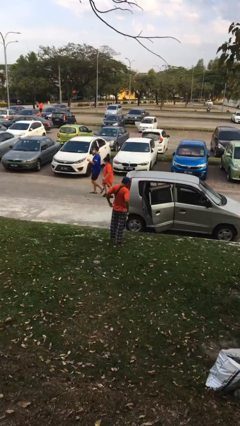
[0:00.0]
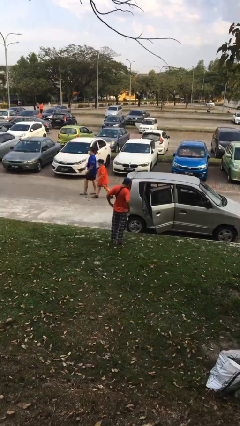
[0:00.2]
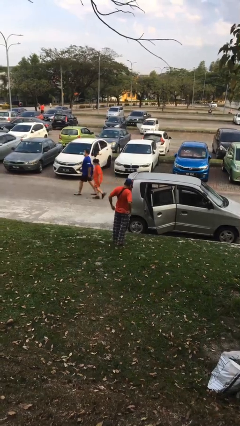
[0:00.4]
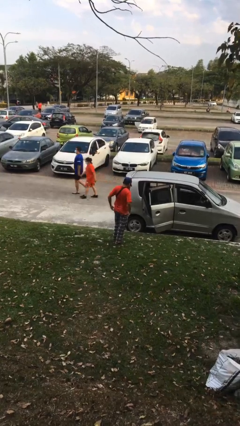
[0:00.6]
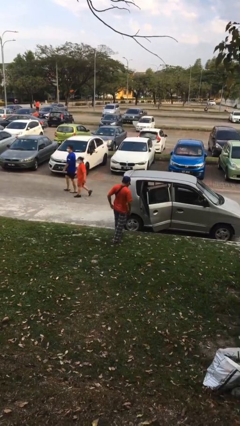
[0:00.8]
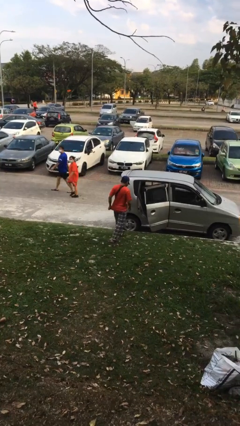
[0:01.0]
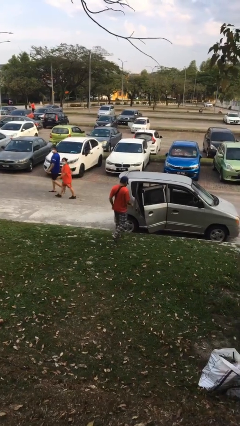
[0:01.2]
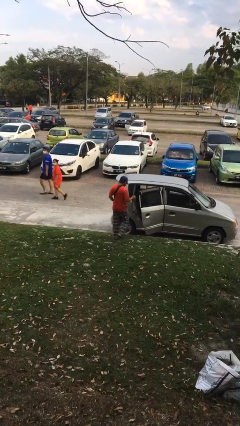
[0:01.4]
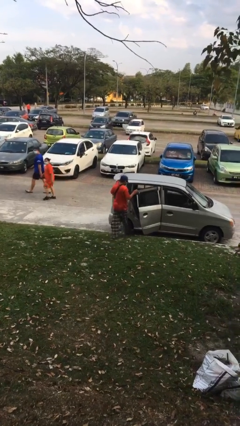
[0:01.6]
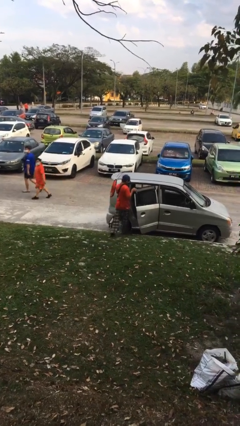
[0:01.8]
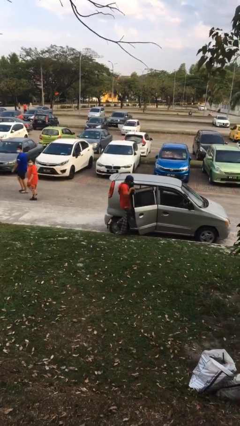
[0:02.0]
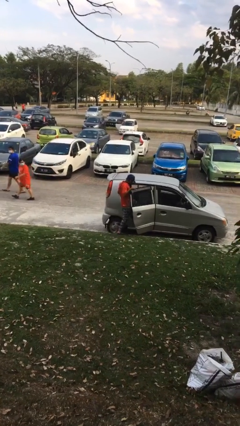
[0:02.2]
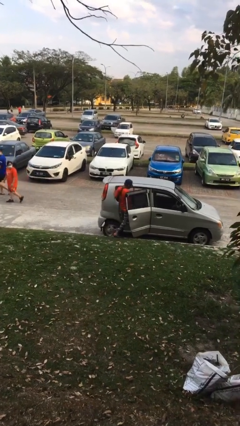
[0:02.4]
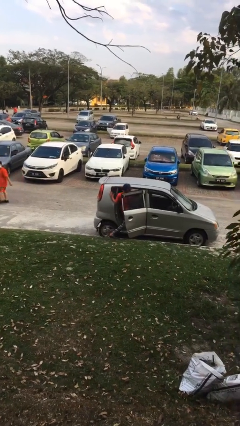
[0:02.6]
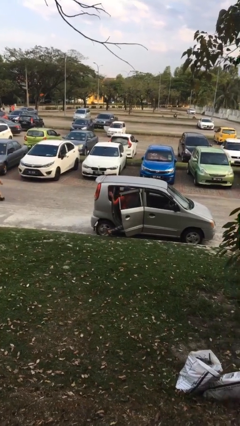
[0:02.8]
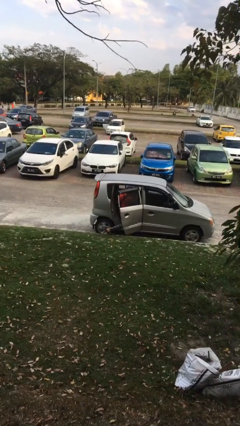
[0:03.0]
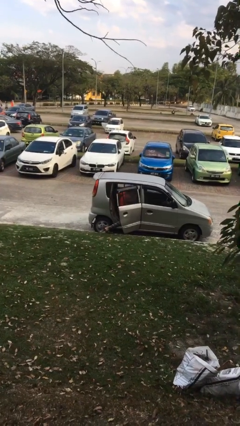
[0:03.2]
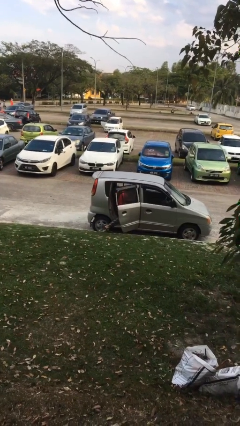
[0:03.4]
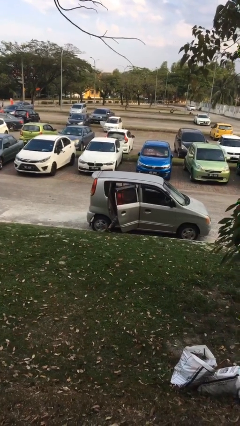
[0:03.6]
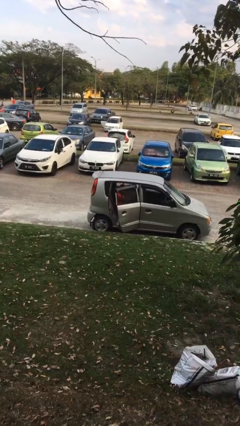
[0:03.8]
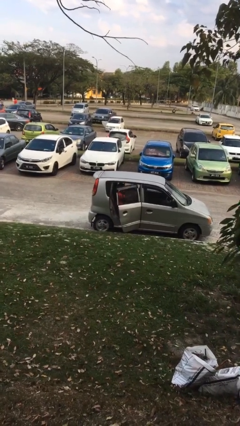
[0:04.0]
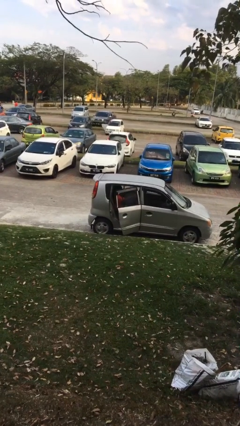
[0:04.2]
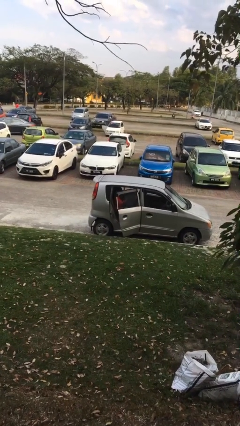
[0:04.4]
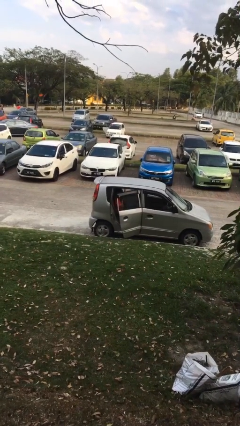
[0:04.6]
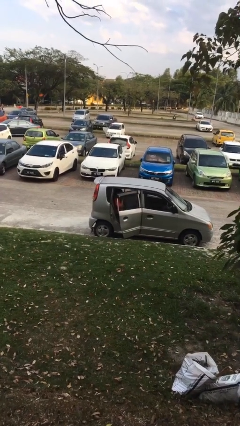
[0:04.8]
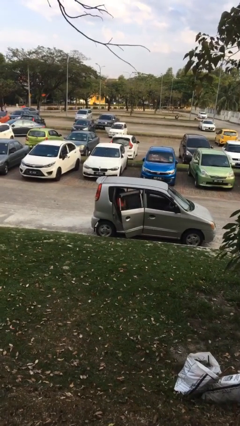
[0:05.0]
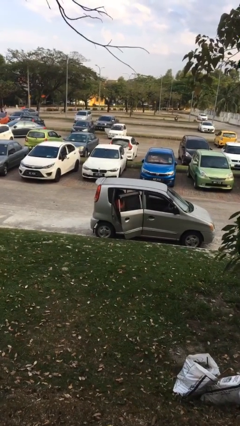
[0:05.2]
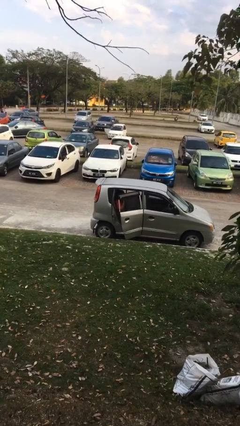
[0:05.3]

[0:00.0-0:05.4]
person enters car

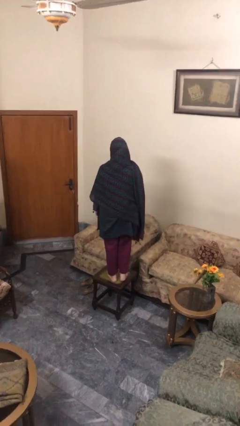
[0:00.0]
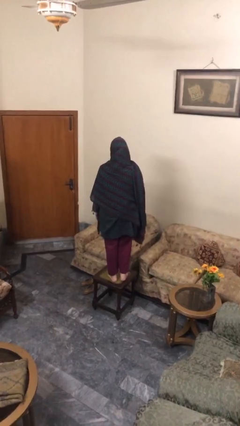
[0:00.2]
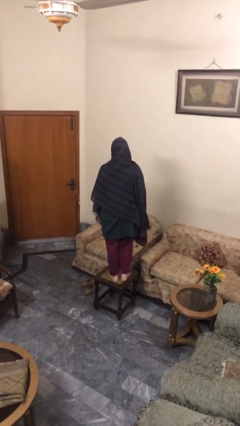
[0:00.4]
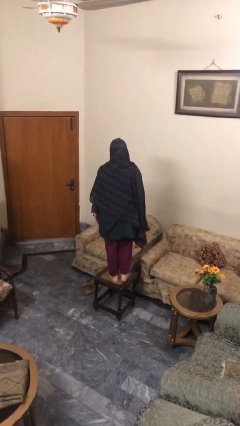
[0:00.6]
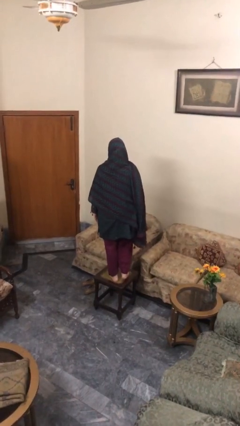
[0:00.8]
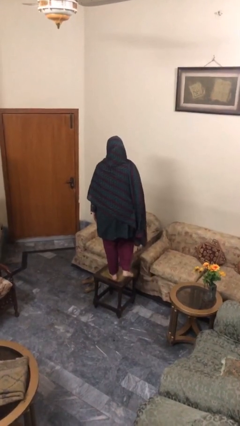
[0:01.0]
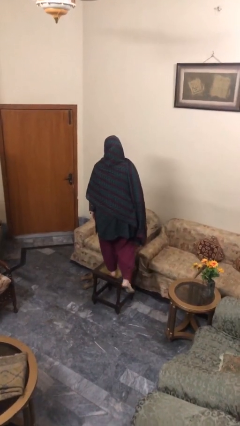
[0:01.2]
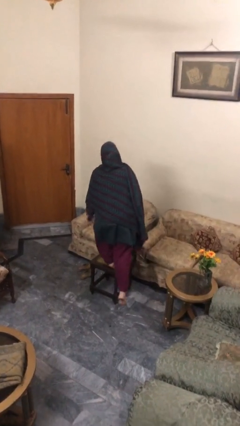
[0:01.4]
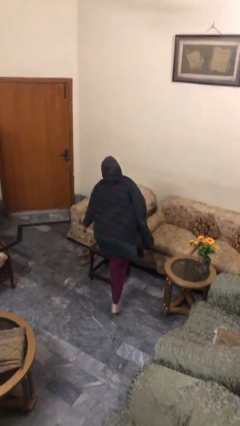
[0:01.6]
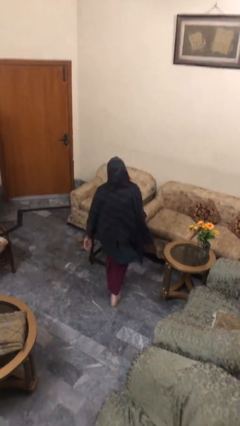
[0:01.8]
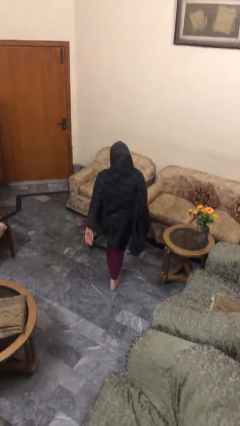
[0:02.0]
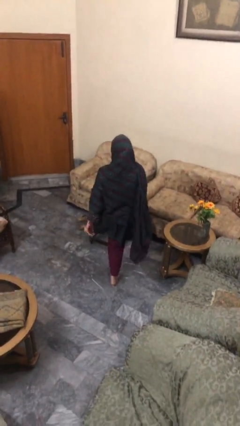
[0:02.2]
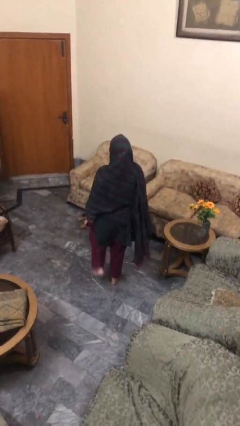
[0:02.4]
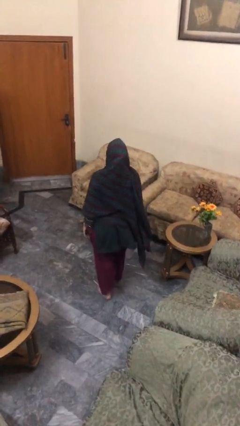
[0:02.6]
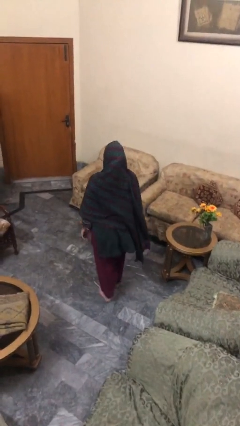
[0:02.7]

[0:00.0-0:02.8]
person climbs off table

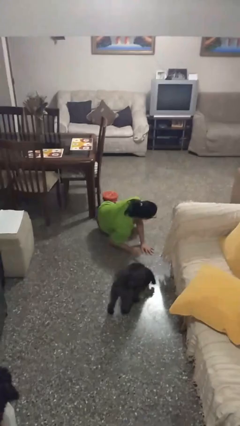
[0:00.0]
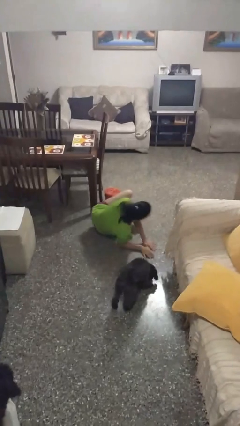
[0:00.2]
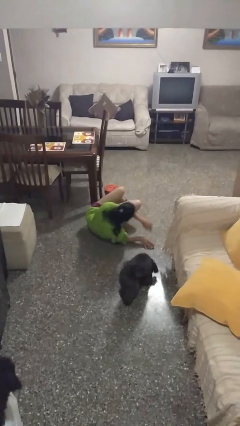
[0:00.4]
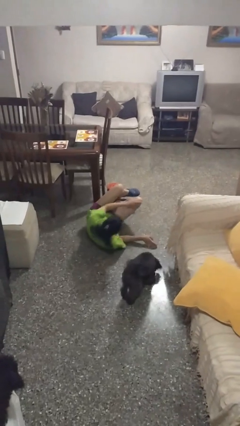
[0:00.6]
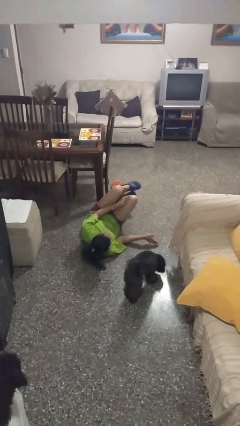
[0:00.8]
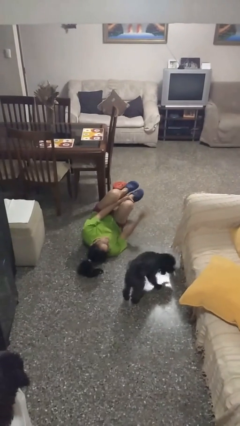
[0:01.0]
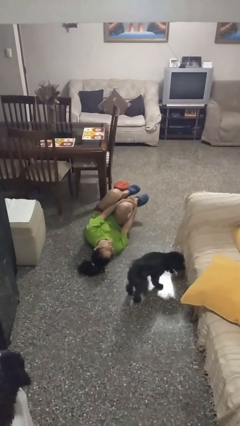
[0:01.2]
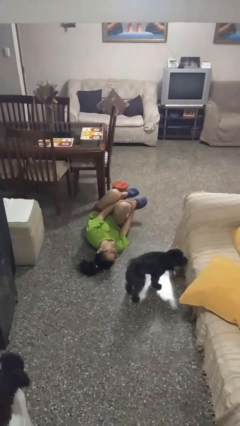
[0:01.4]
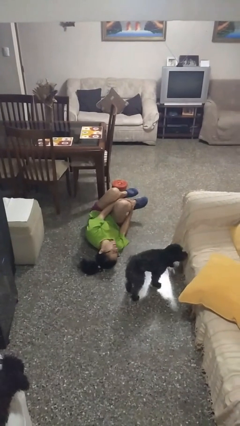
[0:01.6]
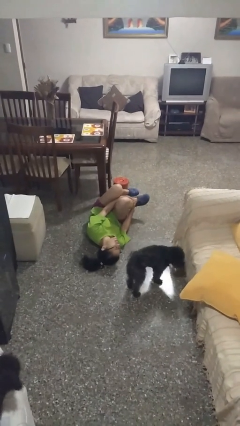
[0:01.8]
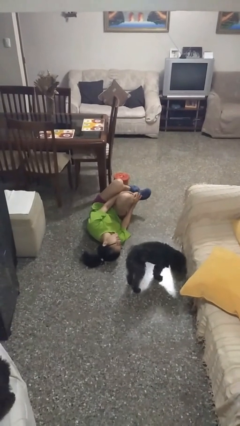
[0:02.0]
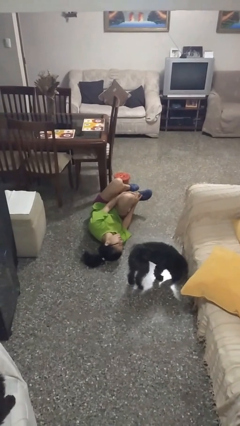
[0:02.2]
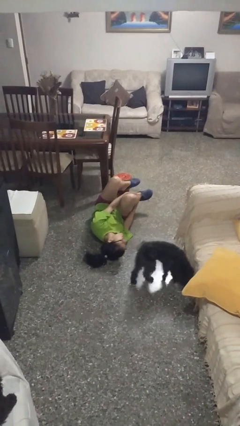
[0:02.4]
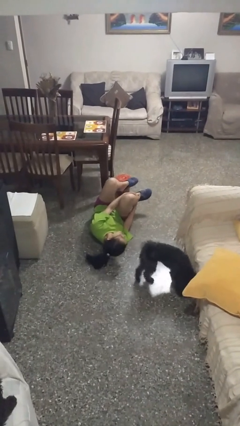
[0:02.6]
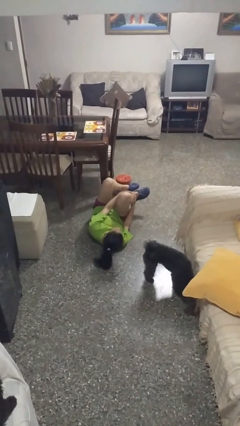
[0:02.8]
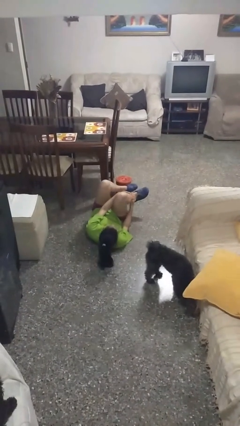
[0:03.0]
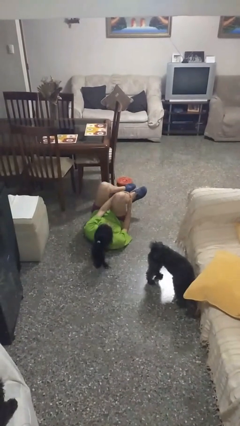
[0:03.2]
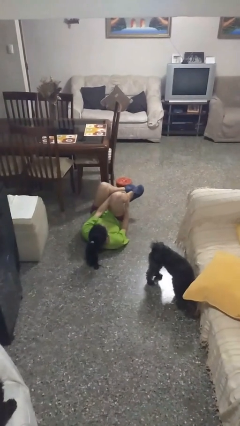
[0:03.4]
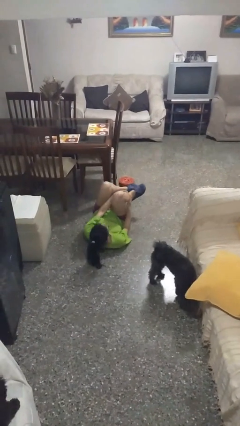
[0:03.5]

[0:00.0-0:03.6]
person lies down on floor

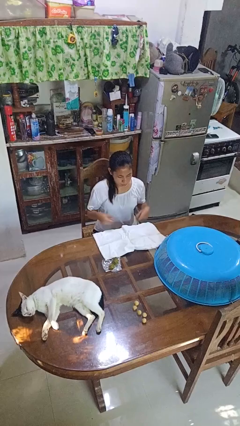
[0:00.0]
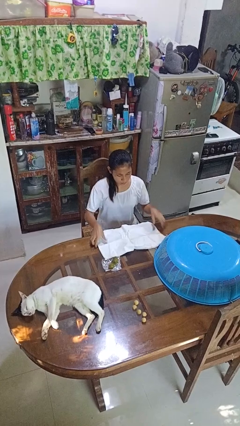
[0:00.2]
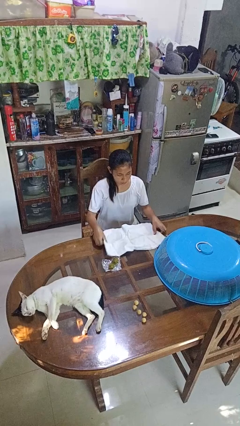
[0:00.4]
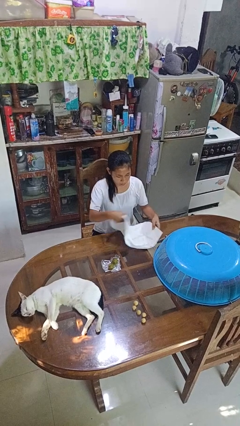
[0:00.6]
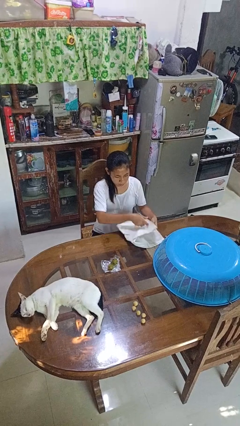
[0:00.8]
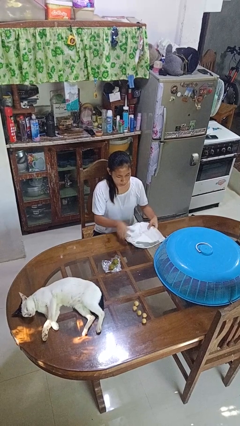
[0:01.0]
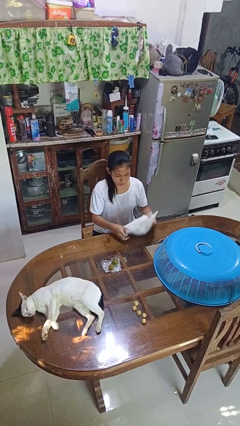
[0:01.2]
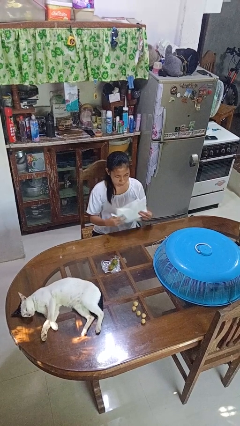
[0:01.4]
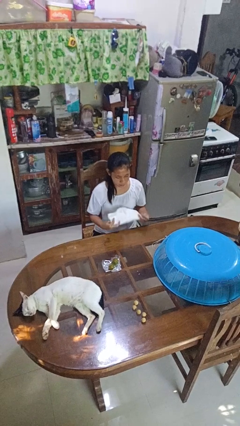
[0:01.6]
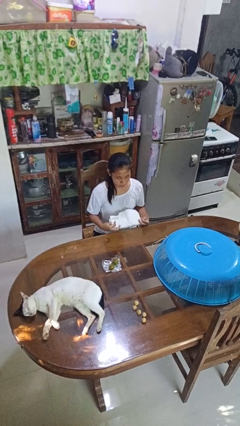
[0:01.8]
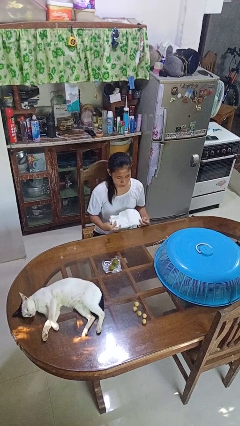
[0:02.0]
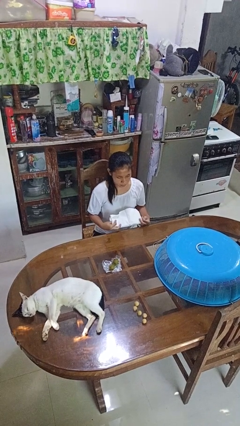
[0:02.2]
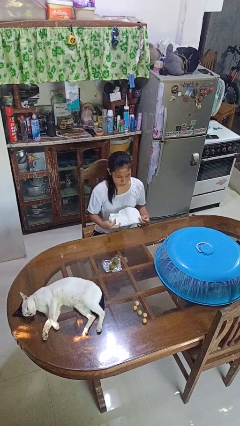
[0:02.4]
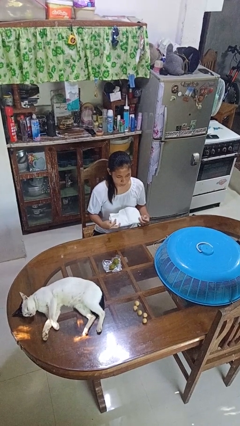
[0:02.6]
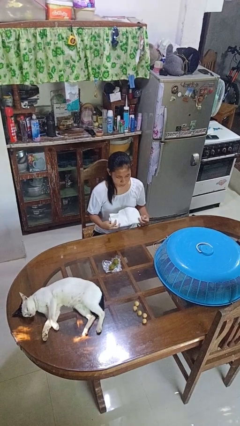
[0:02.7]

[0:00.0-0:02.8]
person folds tablecloth

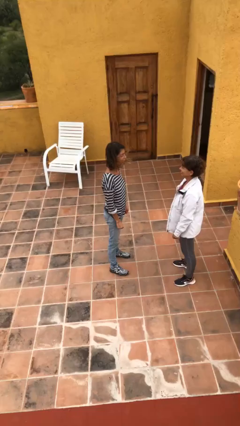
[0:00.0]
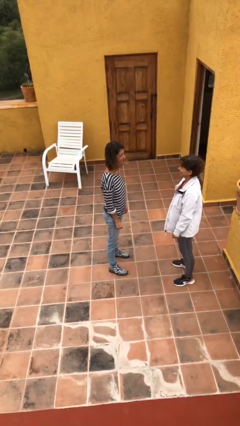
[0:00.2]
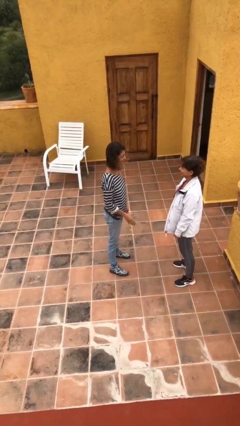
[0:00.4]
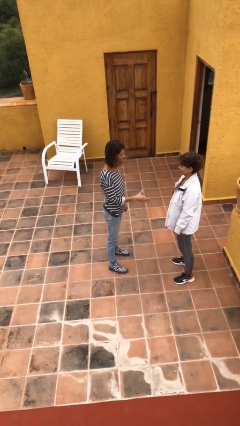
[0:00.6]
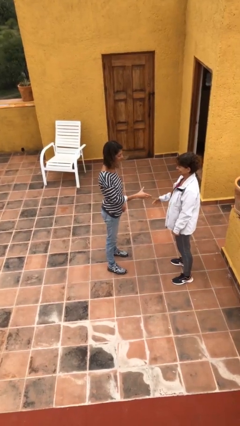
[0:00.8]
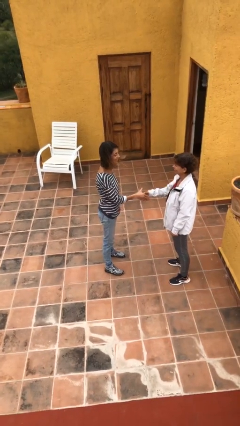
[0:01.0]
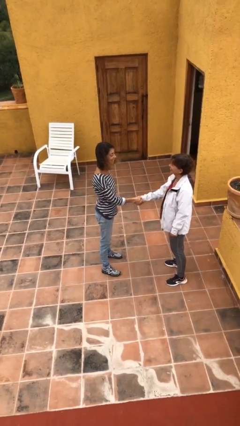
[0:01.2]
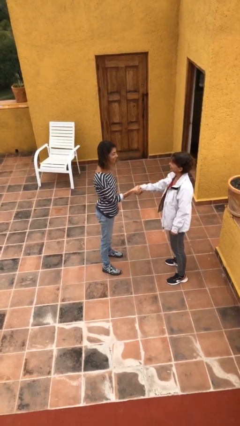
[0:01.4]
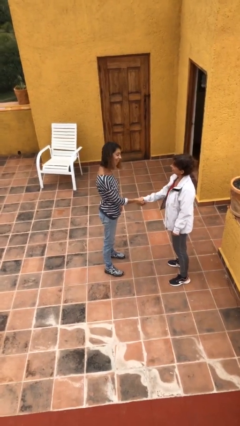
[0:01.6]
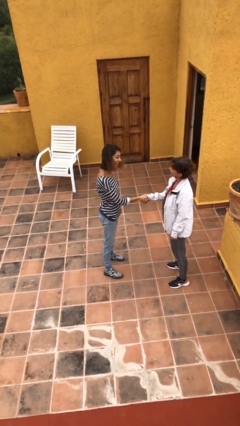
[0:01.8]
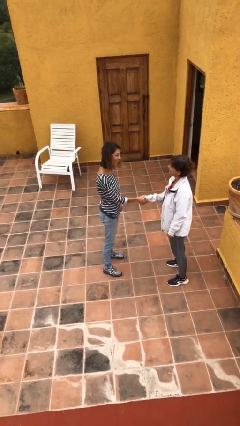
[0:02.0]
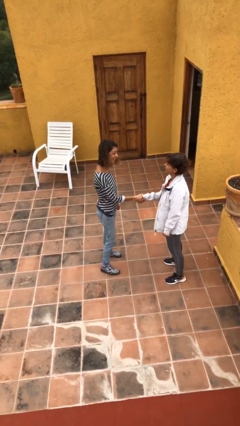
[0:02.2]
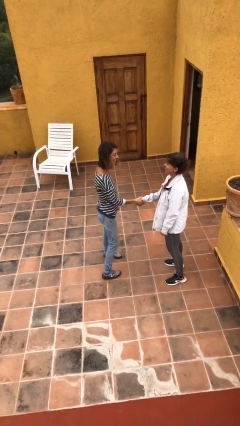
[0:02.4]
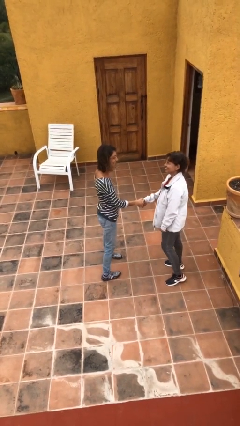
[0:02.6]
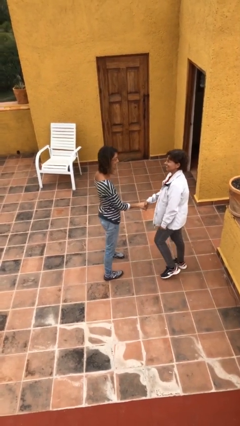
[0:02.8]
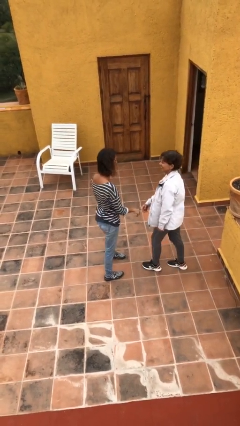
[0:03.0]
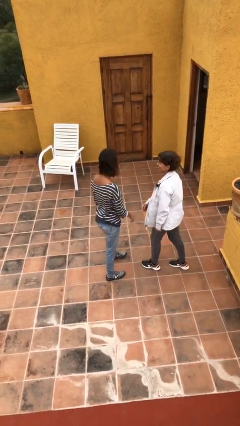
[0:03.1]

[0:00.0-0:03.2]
person shakes hand
